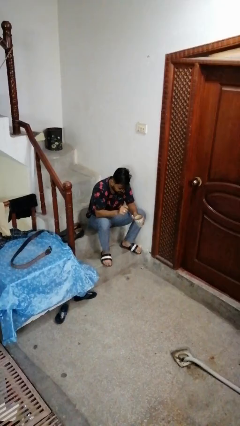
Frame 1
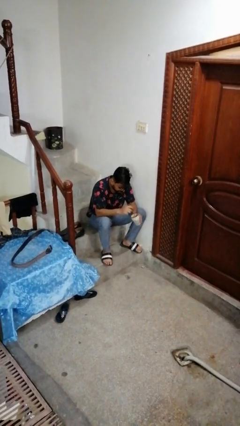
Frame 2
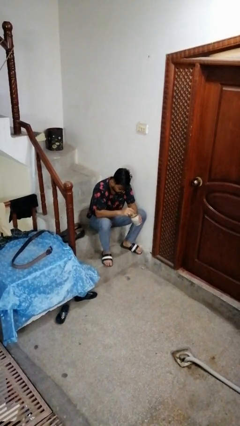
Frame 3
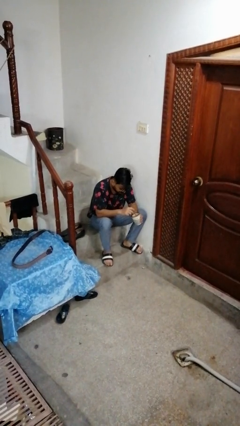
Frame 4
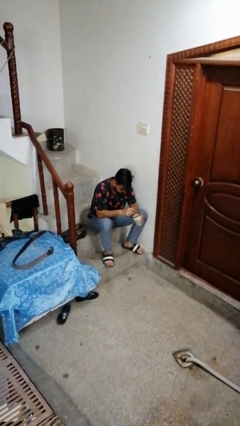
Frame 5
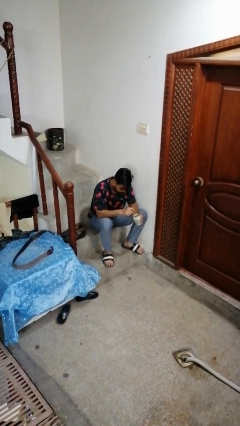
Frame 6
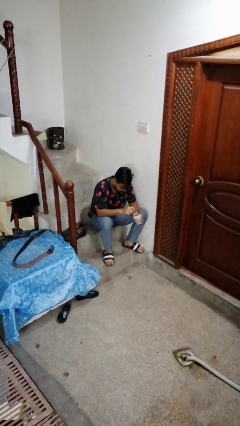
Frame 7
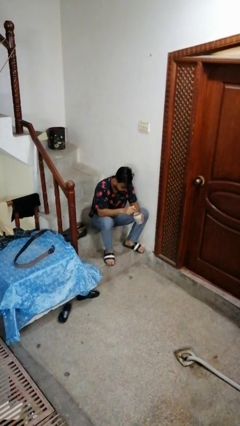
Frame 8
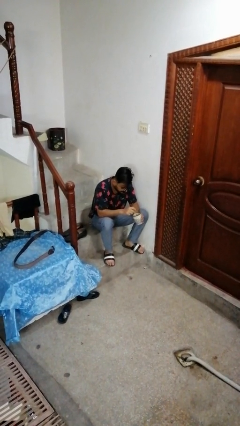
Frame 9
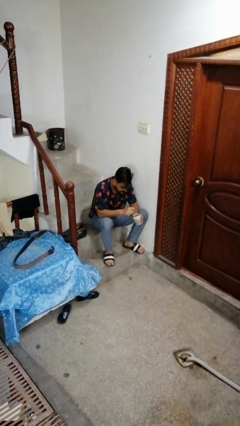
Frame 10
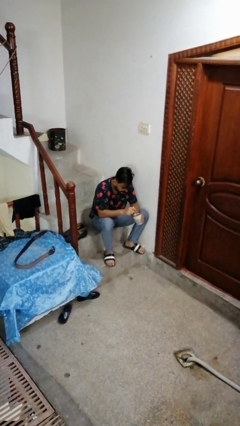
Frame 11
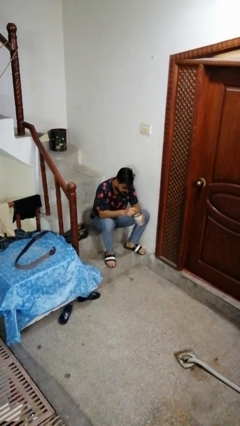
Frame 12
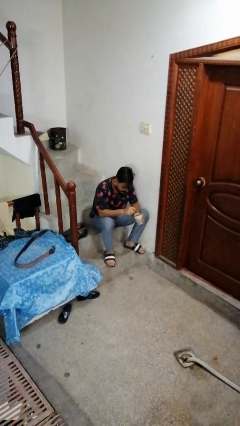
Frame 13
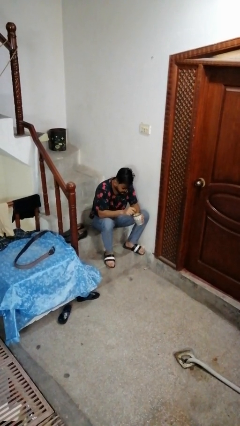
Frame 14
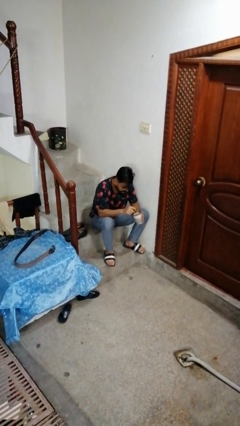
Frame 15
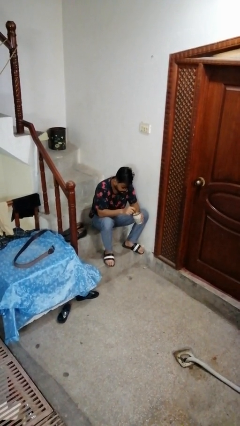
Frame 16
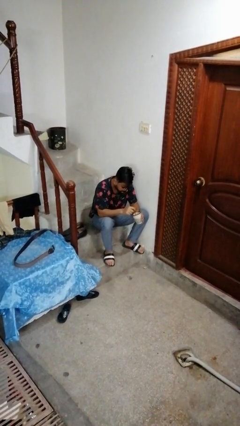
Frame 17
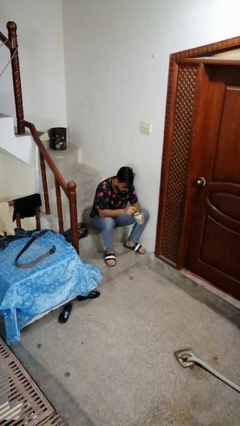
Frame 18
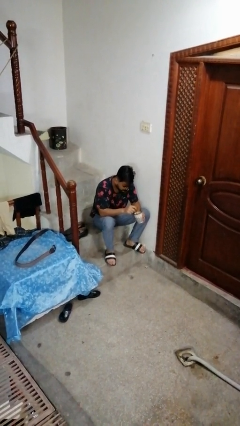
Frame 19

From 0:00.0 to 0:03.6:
person stirs mug

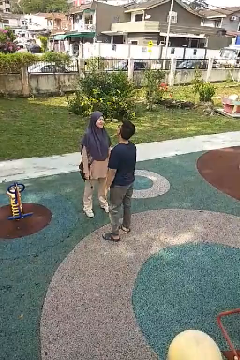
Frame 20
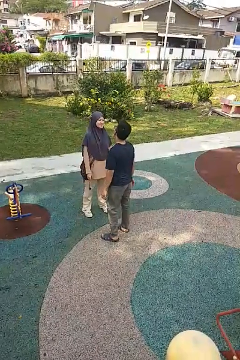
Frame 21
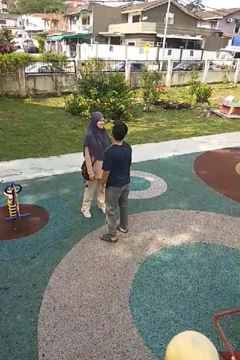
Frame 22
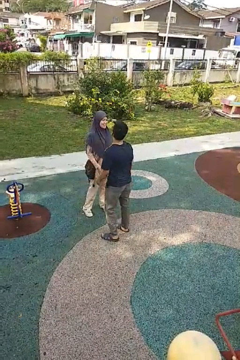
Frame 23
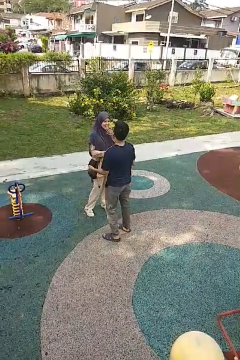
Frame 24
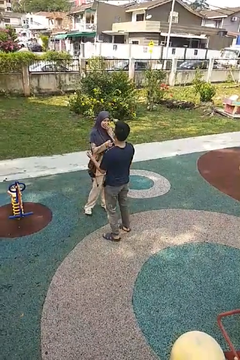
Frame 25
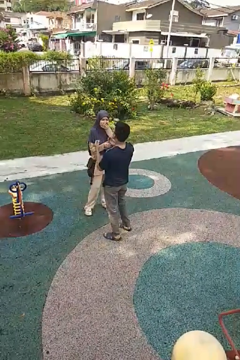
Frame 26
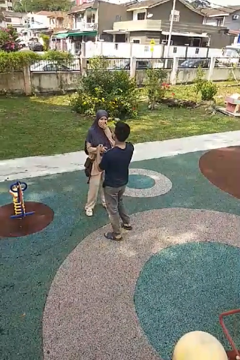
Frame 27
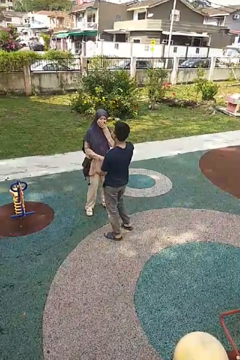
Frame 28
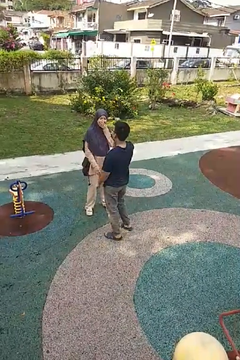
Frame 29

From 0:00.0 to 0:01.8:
person laughs with person

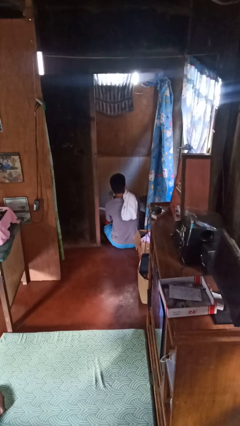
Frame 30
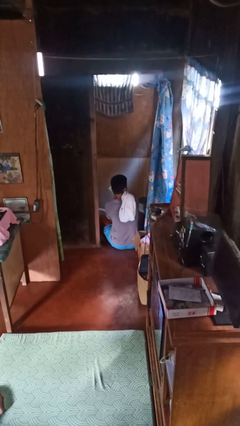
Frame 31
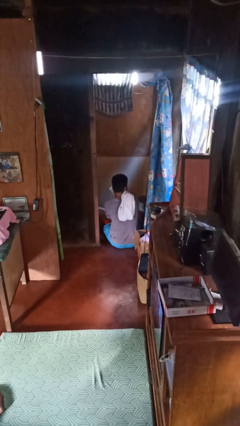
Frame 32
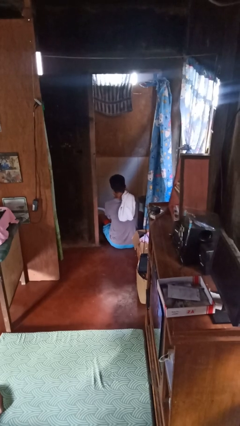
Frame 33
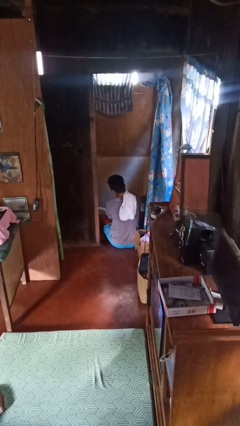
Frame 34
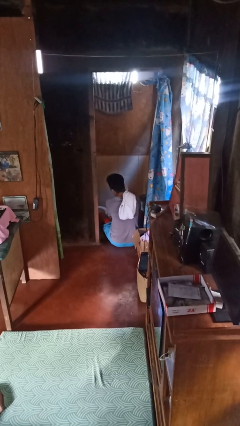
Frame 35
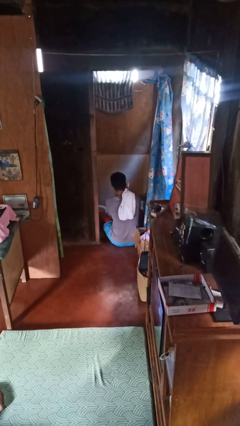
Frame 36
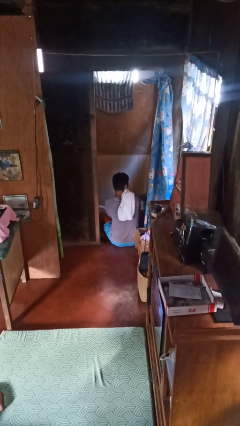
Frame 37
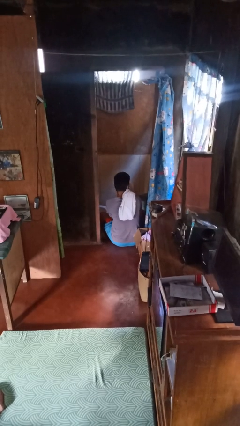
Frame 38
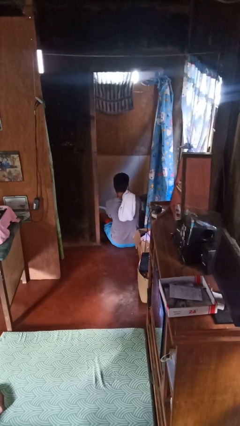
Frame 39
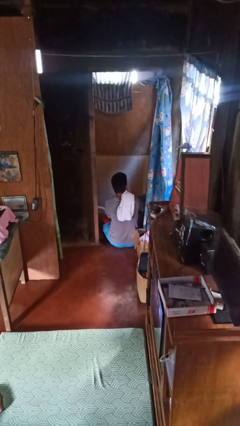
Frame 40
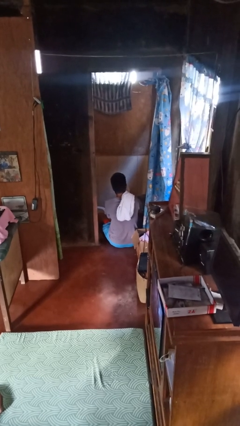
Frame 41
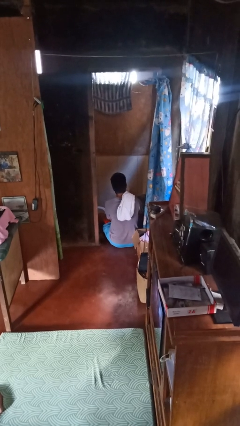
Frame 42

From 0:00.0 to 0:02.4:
person dries face with towel

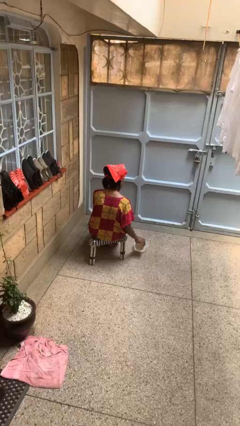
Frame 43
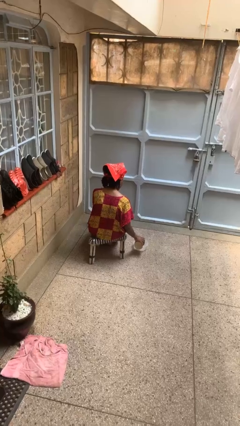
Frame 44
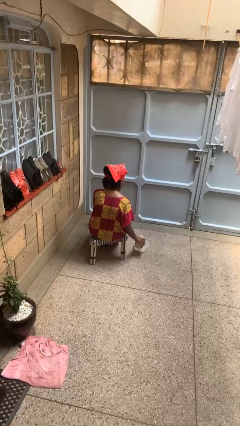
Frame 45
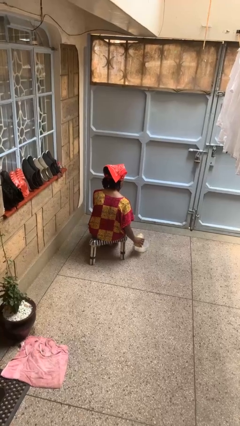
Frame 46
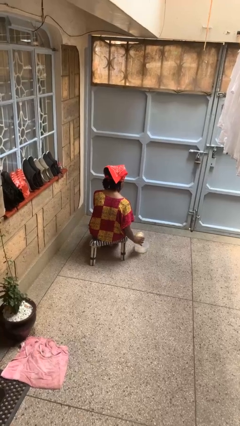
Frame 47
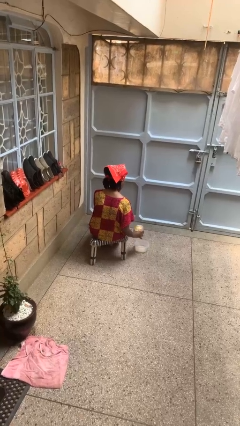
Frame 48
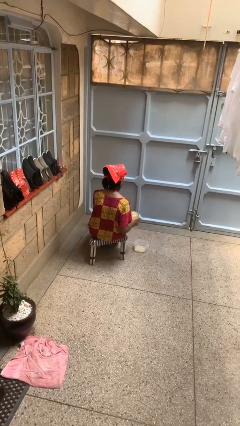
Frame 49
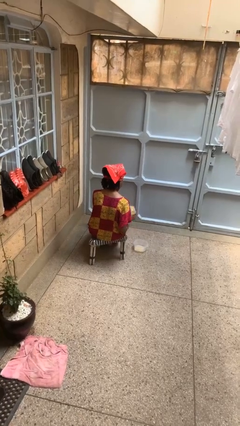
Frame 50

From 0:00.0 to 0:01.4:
person pours into bowl

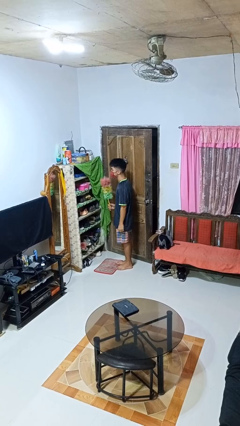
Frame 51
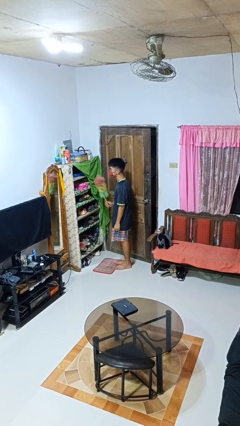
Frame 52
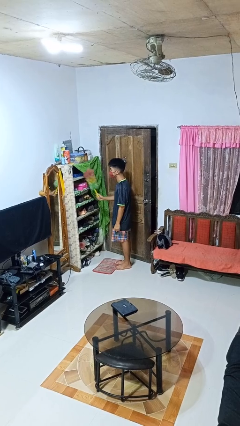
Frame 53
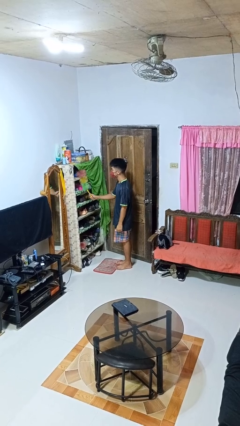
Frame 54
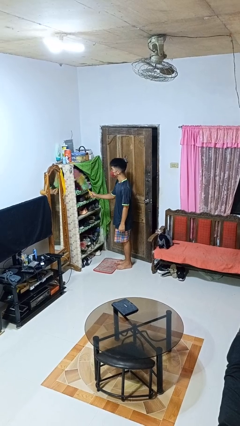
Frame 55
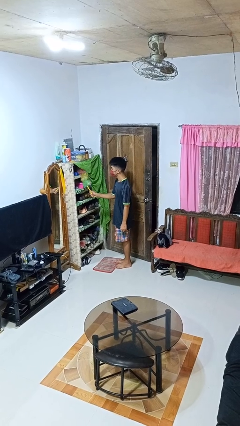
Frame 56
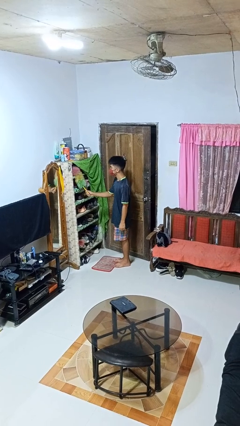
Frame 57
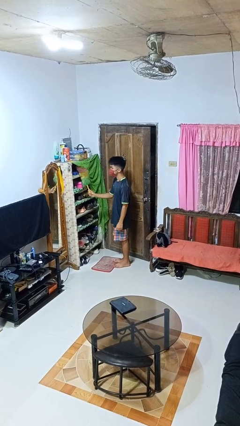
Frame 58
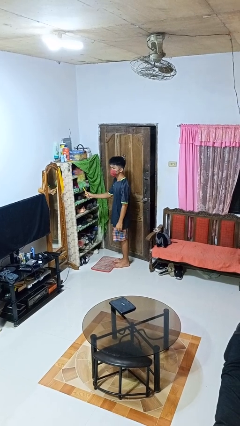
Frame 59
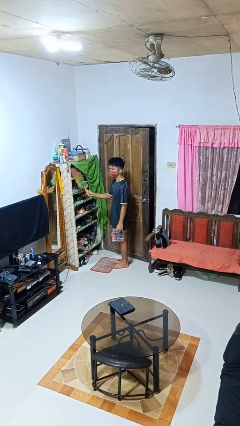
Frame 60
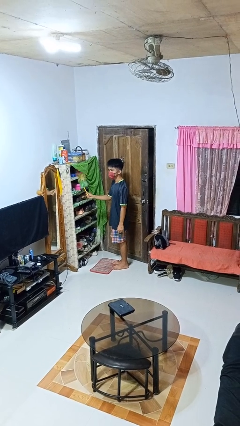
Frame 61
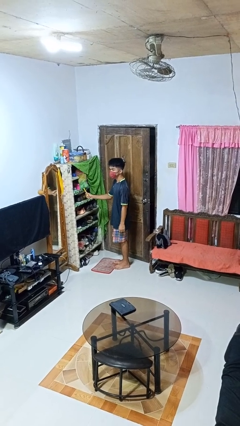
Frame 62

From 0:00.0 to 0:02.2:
person dusts furniture

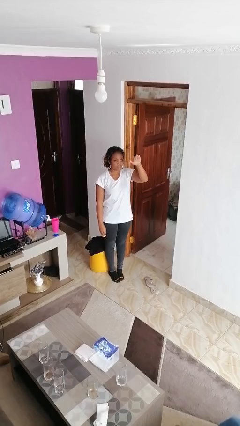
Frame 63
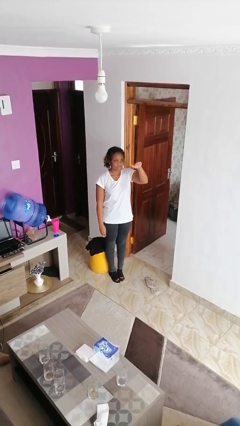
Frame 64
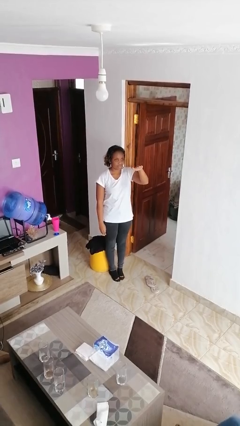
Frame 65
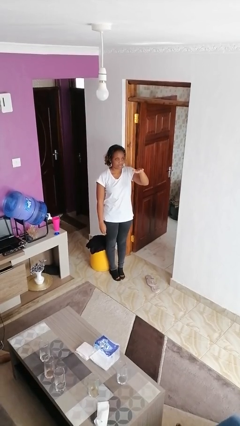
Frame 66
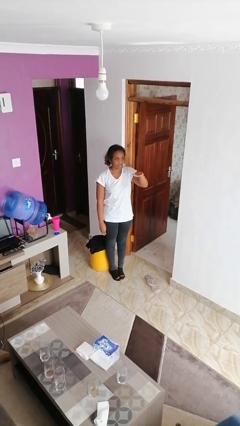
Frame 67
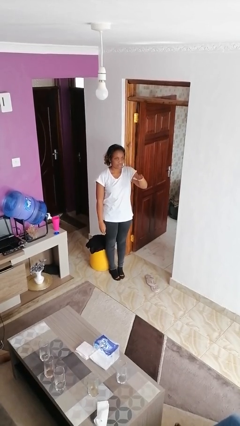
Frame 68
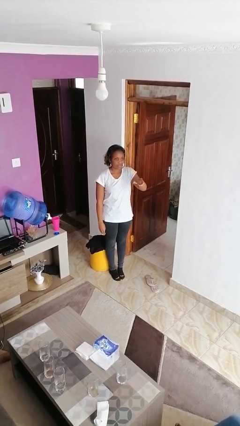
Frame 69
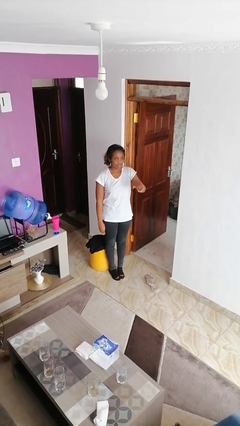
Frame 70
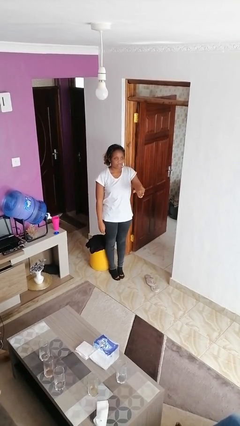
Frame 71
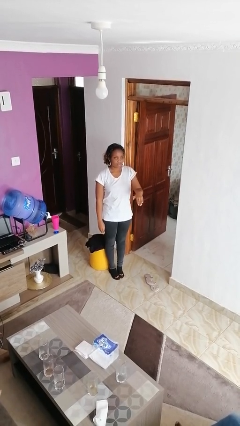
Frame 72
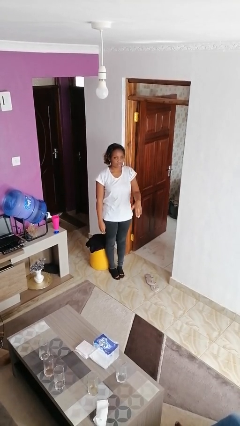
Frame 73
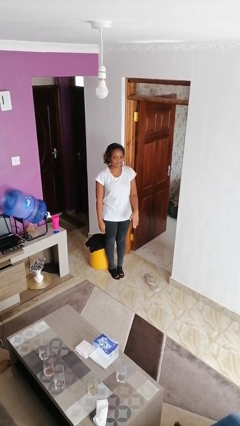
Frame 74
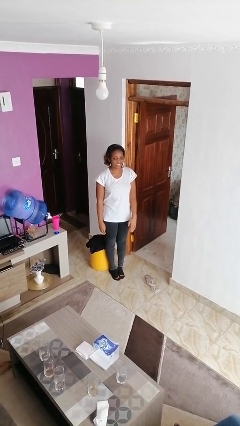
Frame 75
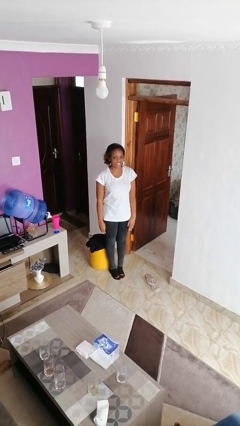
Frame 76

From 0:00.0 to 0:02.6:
person gestures swipe down

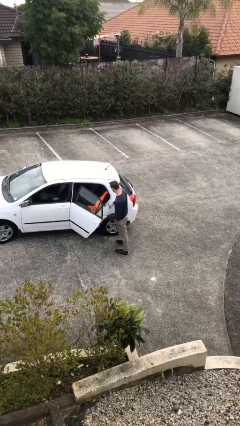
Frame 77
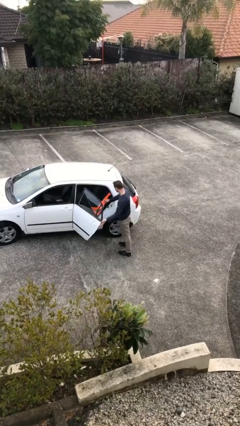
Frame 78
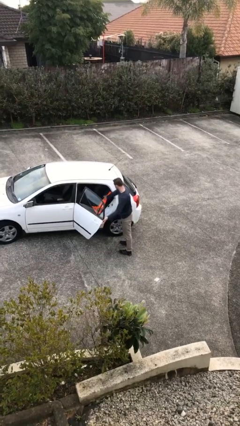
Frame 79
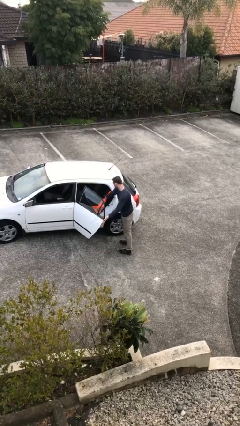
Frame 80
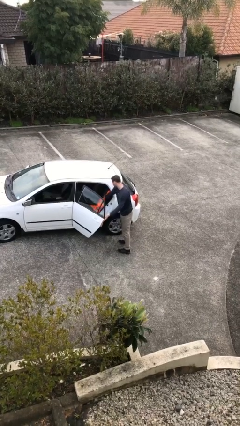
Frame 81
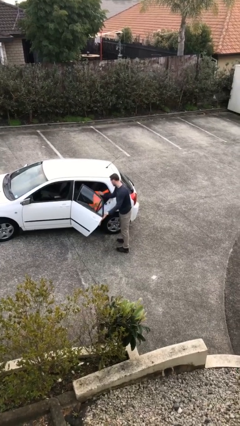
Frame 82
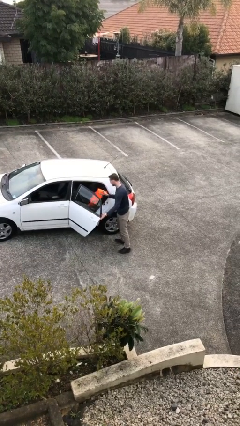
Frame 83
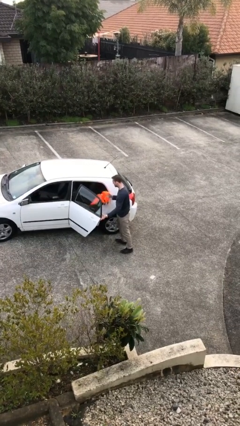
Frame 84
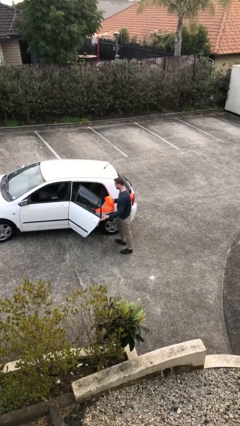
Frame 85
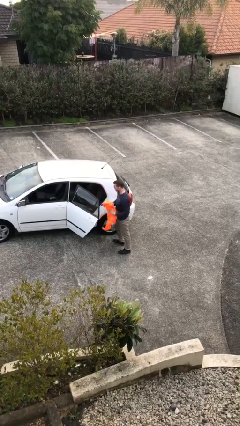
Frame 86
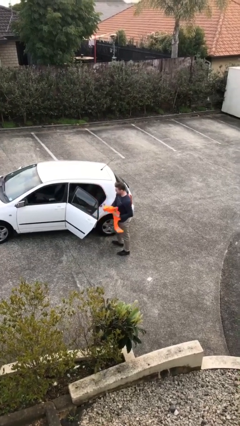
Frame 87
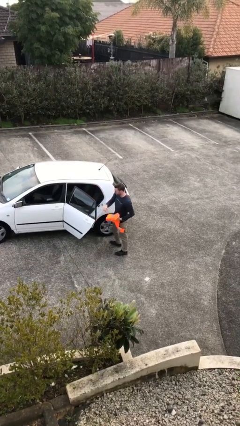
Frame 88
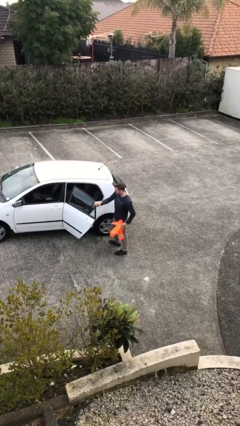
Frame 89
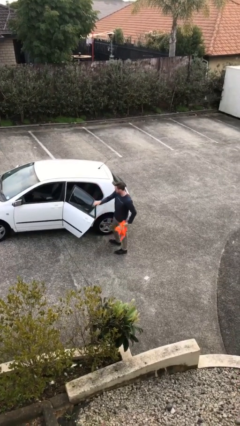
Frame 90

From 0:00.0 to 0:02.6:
person unloads car

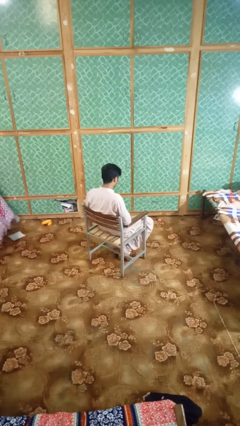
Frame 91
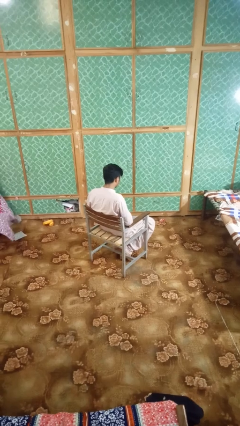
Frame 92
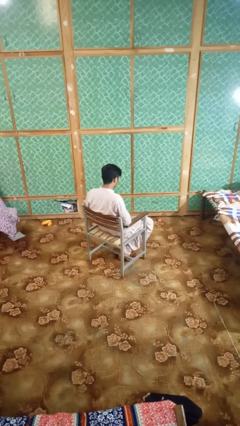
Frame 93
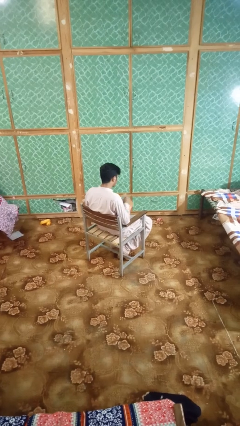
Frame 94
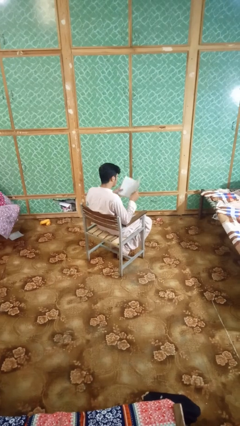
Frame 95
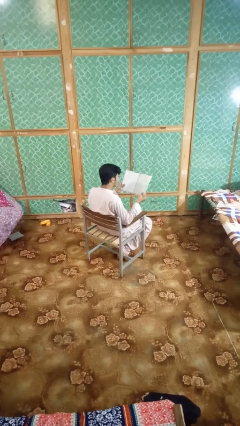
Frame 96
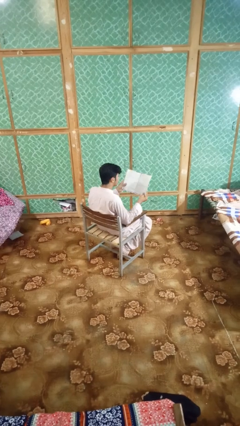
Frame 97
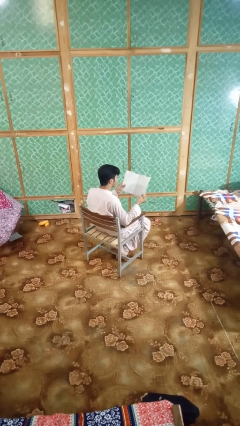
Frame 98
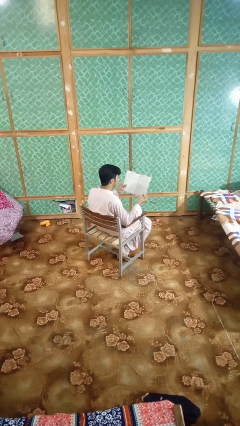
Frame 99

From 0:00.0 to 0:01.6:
person reads book
